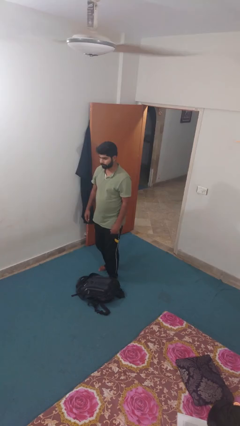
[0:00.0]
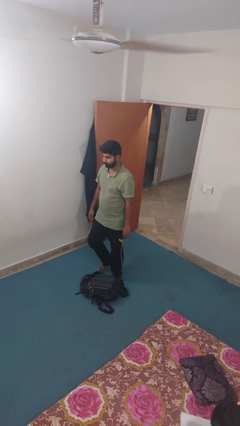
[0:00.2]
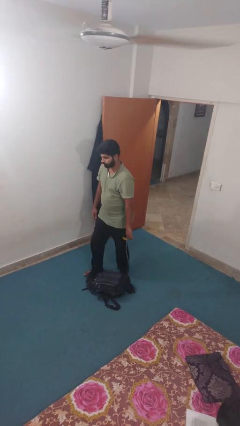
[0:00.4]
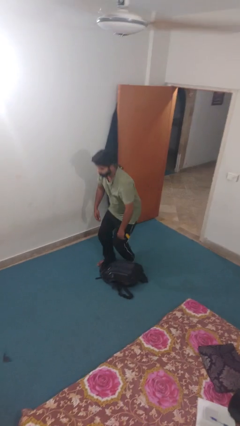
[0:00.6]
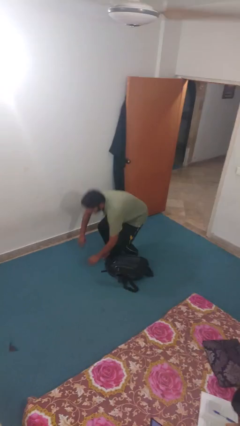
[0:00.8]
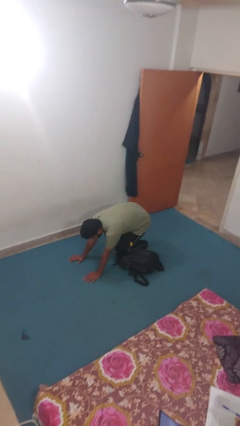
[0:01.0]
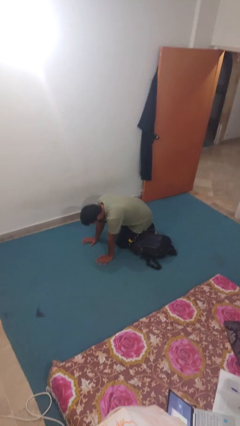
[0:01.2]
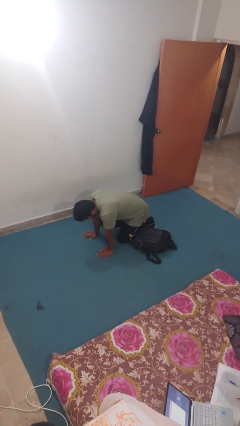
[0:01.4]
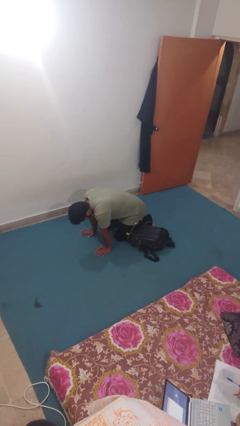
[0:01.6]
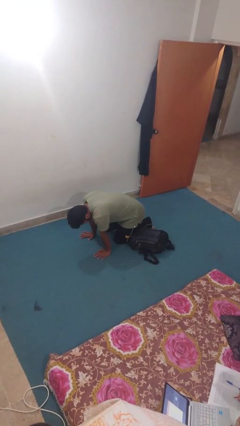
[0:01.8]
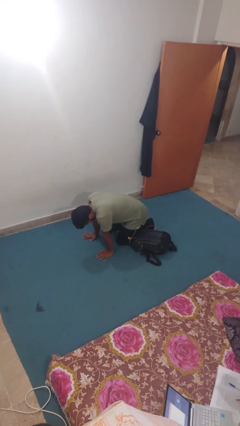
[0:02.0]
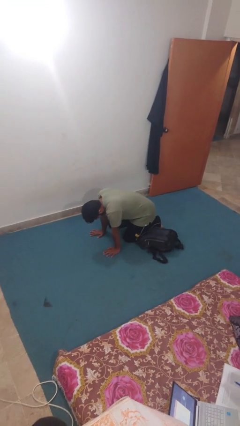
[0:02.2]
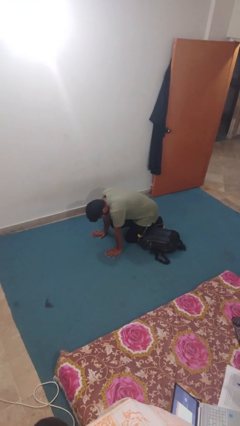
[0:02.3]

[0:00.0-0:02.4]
person trips on object on floor

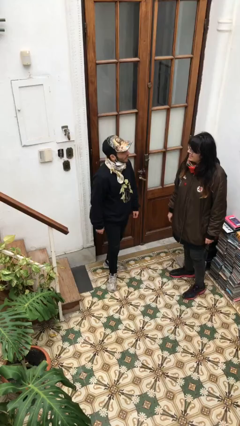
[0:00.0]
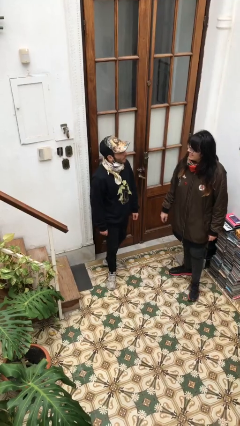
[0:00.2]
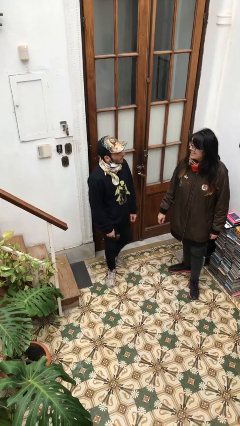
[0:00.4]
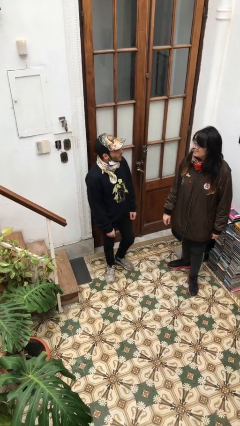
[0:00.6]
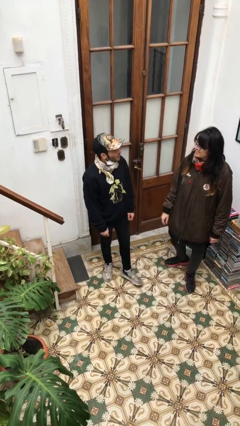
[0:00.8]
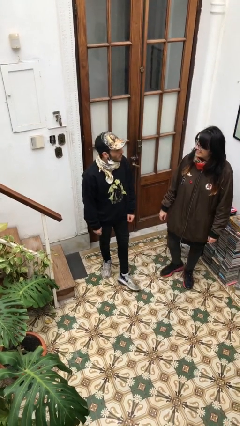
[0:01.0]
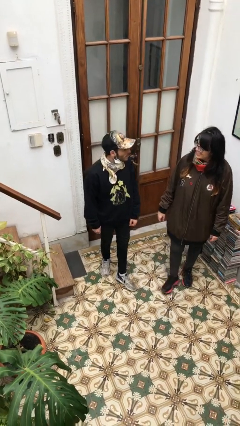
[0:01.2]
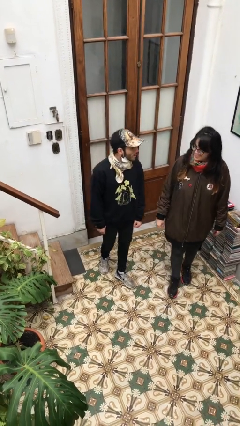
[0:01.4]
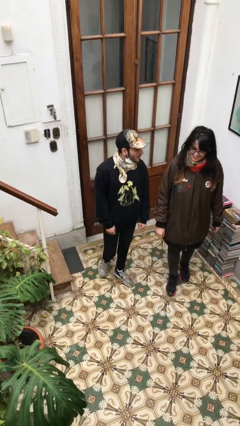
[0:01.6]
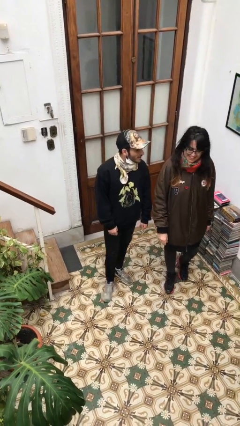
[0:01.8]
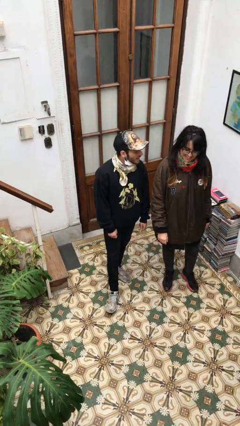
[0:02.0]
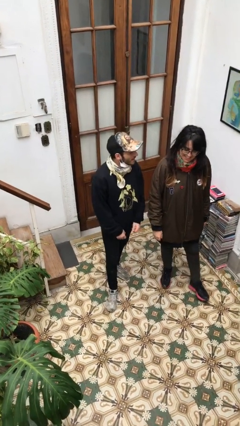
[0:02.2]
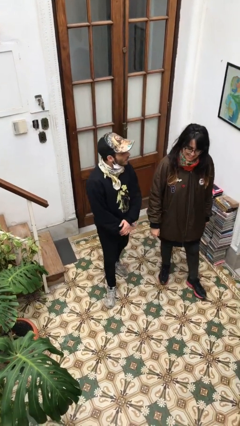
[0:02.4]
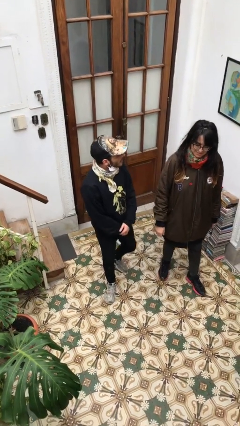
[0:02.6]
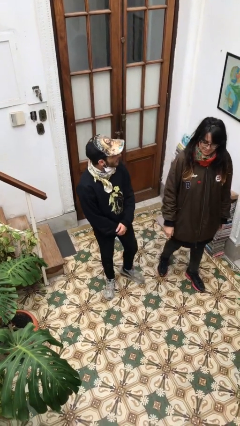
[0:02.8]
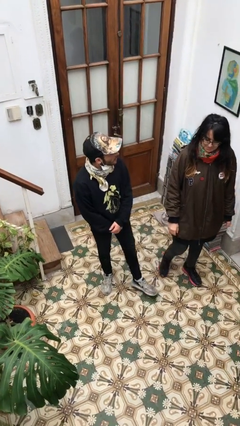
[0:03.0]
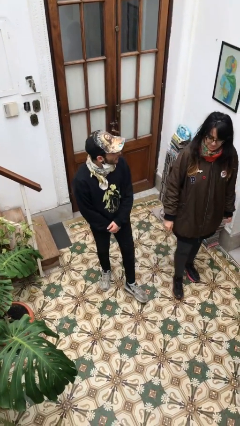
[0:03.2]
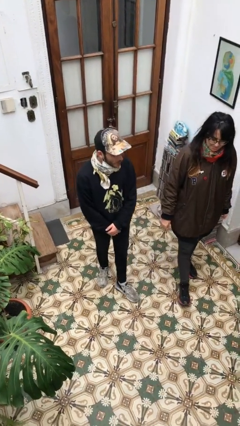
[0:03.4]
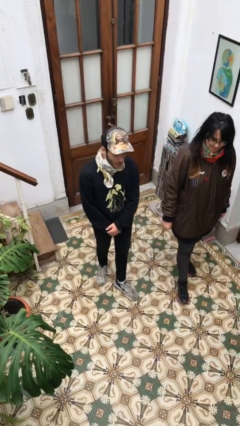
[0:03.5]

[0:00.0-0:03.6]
person talks to person

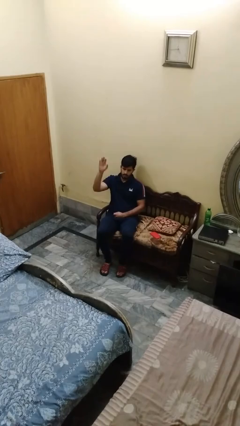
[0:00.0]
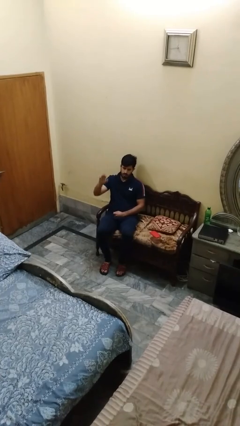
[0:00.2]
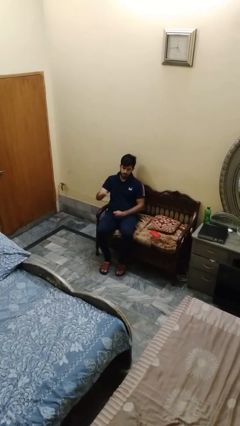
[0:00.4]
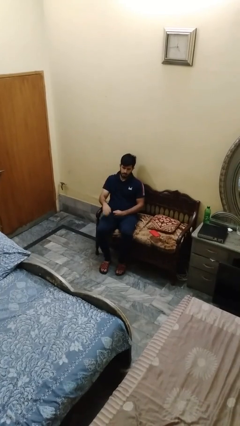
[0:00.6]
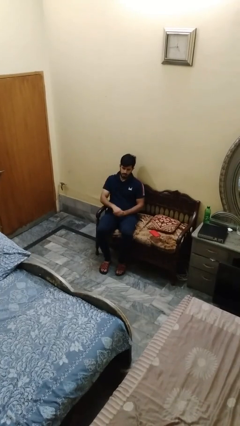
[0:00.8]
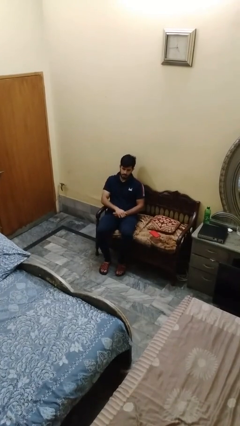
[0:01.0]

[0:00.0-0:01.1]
person gestures lower hand

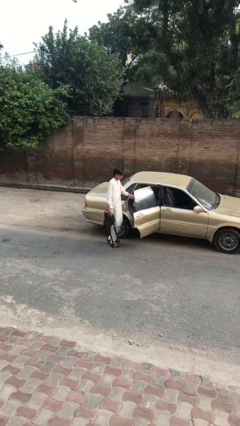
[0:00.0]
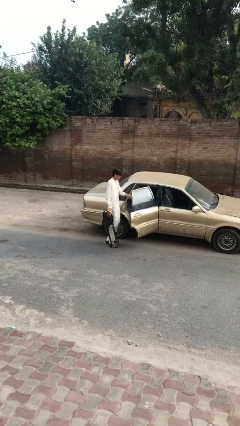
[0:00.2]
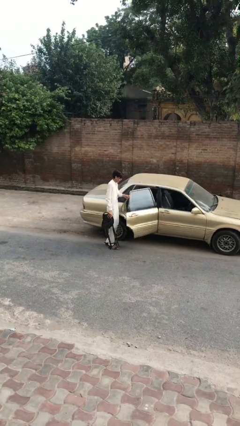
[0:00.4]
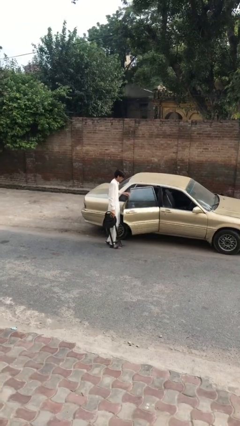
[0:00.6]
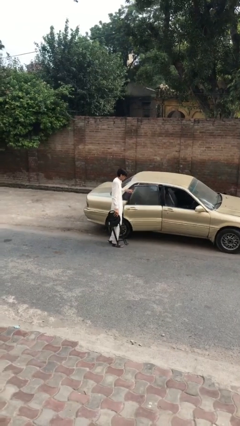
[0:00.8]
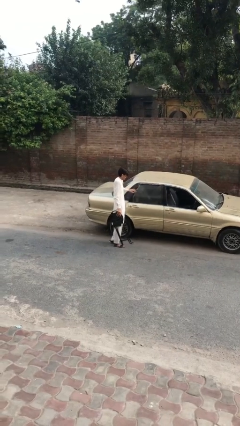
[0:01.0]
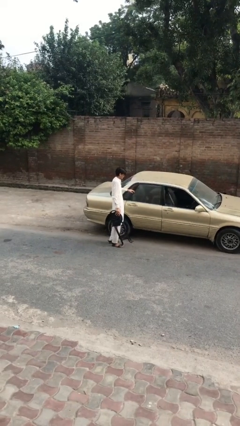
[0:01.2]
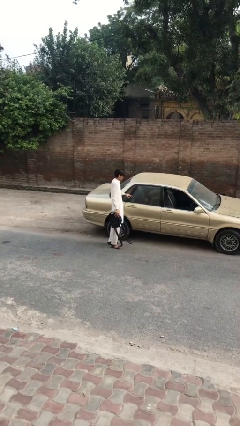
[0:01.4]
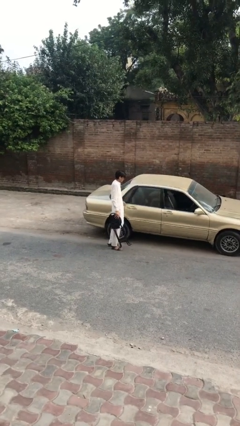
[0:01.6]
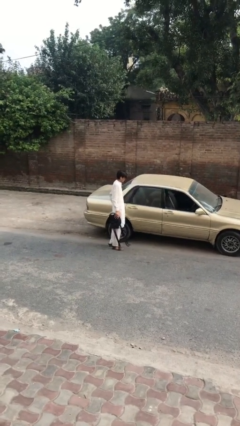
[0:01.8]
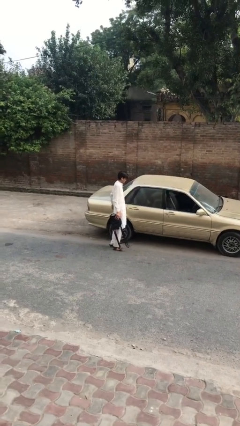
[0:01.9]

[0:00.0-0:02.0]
person closes car door

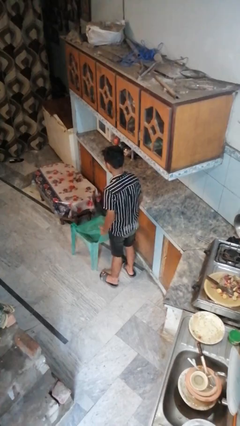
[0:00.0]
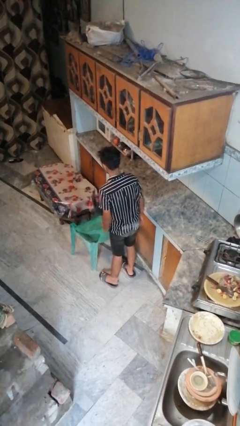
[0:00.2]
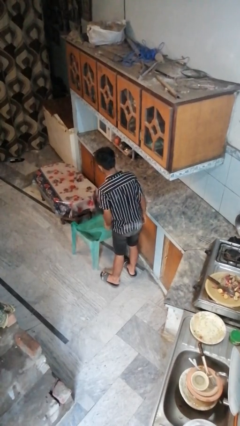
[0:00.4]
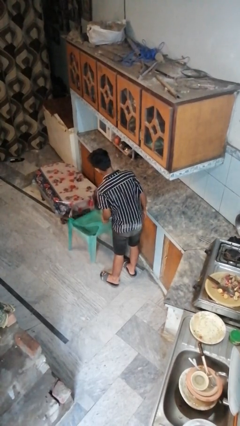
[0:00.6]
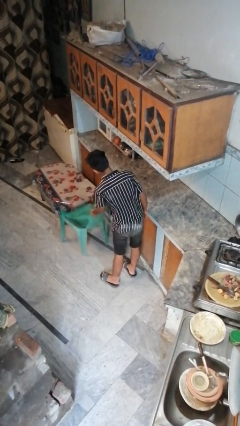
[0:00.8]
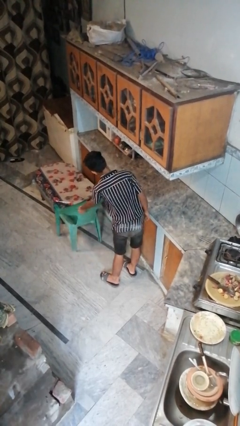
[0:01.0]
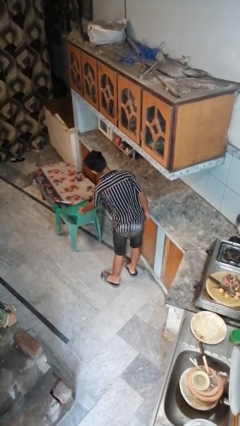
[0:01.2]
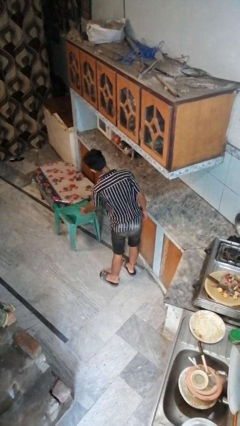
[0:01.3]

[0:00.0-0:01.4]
person pushes in chair

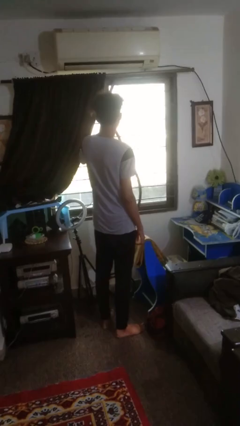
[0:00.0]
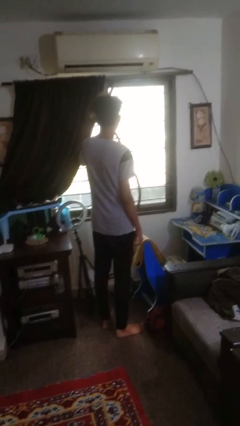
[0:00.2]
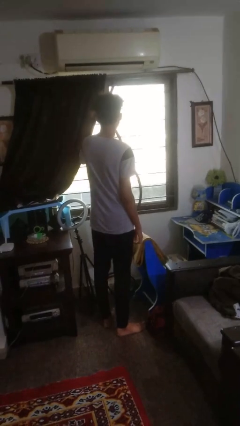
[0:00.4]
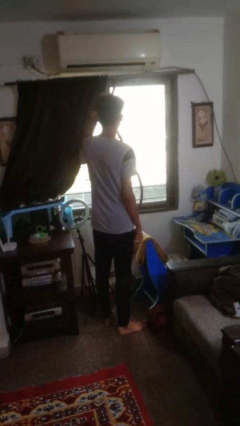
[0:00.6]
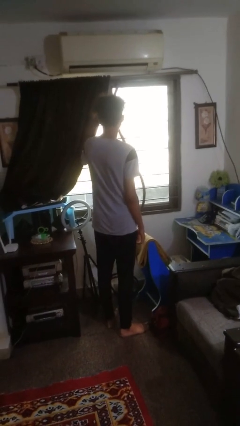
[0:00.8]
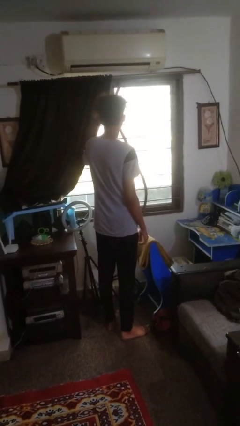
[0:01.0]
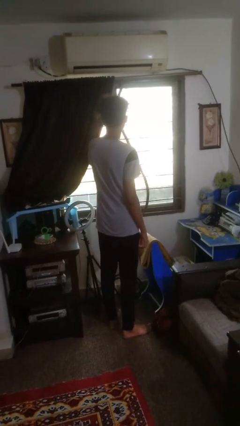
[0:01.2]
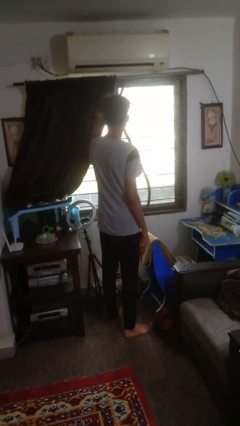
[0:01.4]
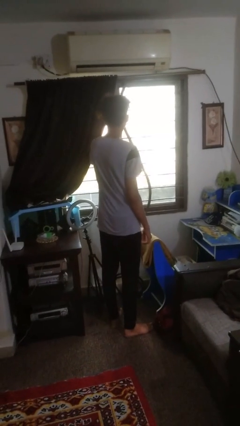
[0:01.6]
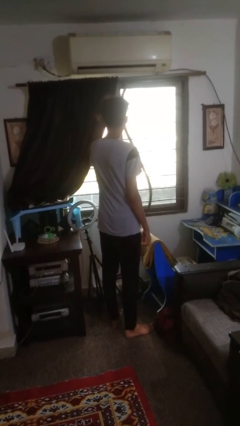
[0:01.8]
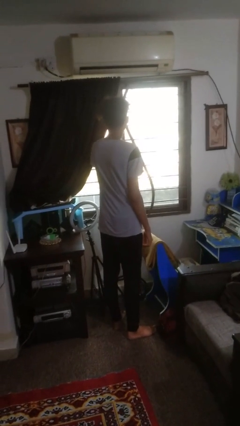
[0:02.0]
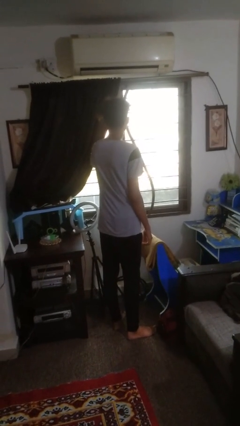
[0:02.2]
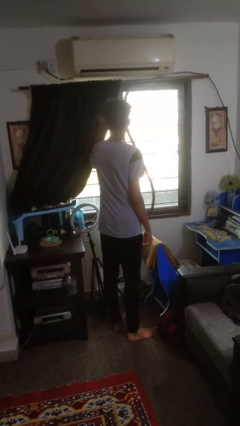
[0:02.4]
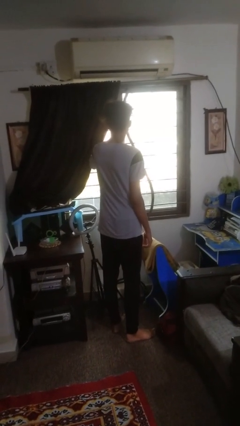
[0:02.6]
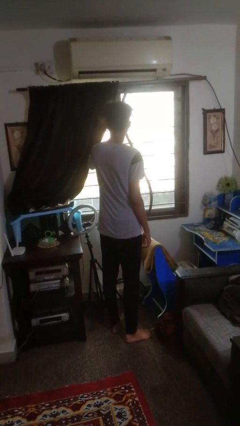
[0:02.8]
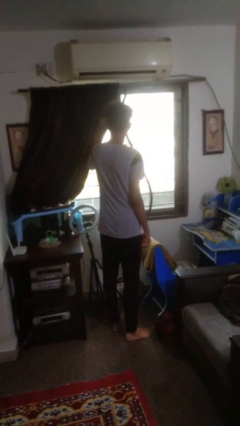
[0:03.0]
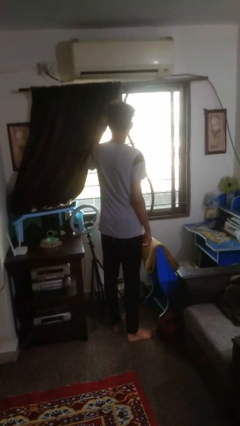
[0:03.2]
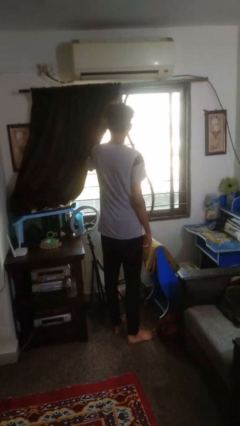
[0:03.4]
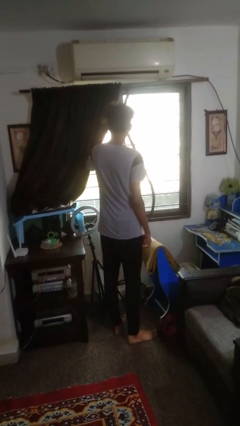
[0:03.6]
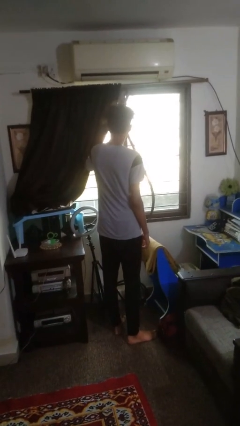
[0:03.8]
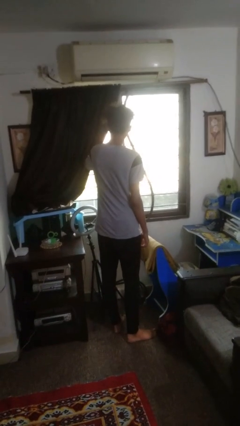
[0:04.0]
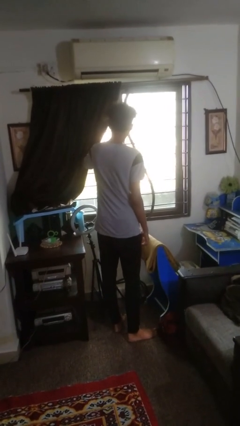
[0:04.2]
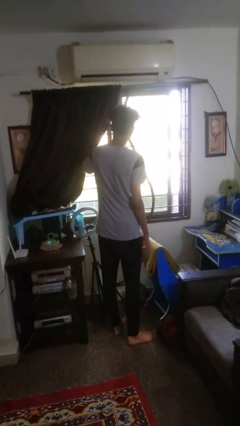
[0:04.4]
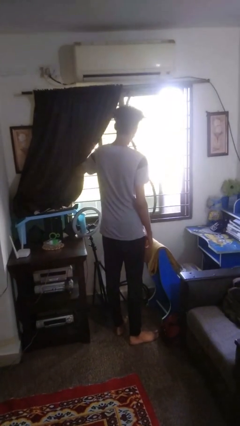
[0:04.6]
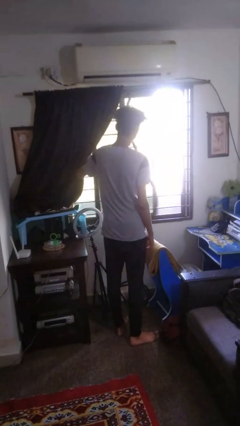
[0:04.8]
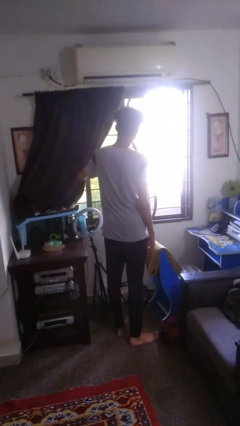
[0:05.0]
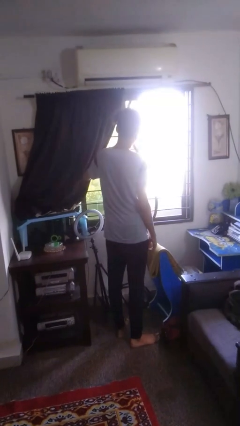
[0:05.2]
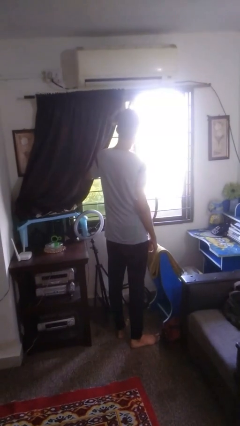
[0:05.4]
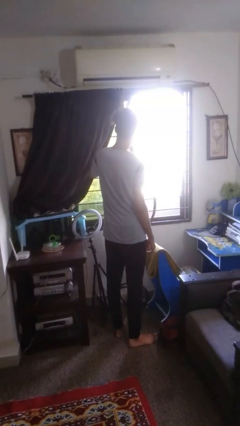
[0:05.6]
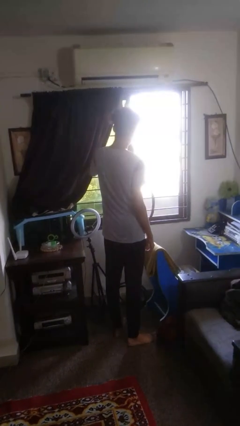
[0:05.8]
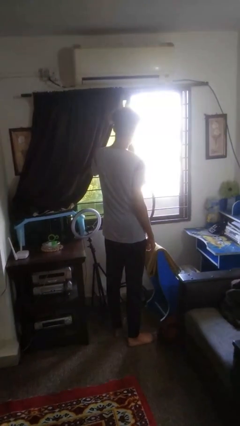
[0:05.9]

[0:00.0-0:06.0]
person opens home window

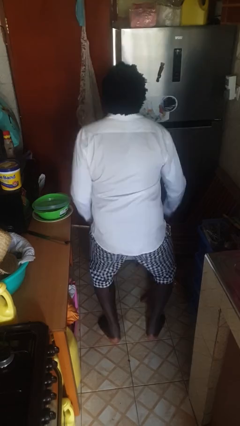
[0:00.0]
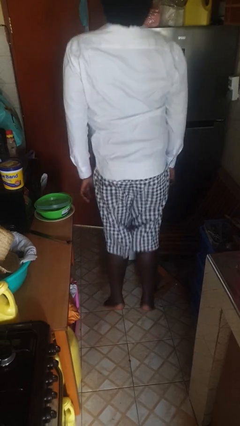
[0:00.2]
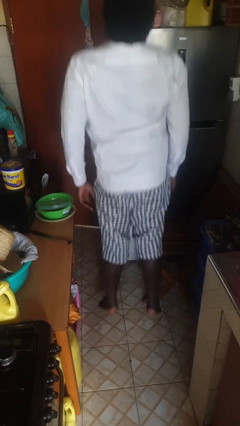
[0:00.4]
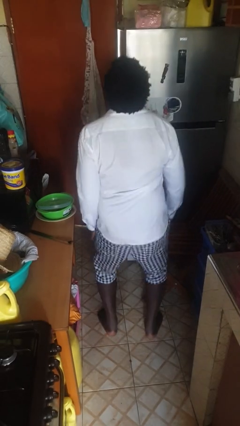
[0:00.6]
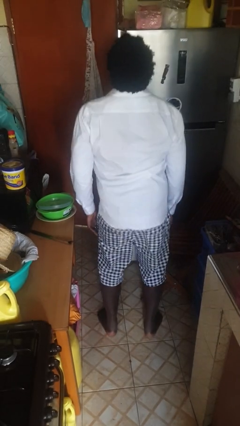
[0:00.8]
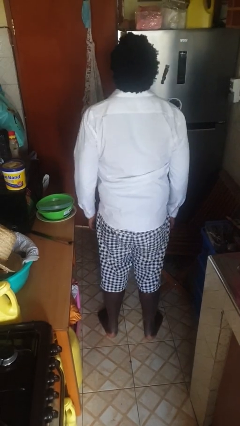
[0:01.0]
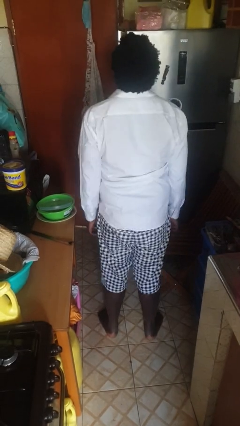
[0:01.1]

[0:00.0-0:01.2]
person jumps
